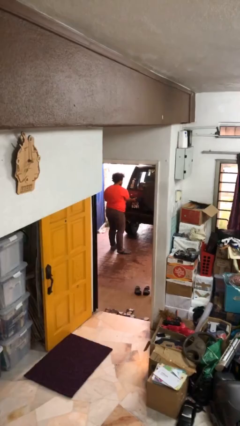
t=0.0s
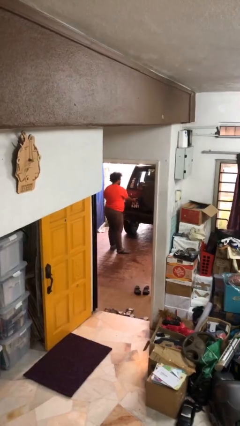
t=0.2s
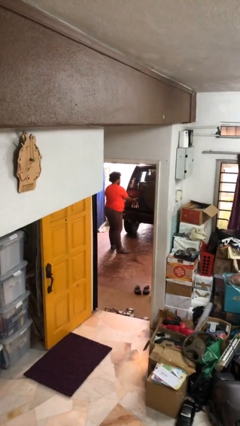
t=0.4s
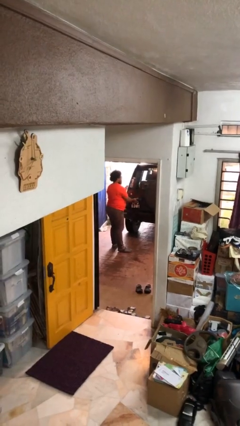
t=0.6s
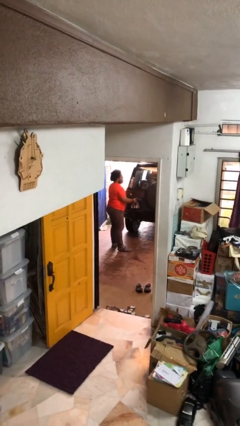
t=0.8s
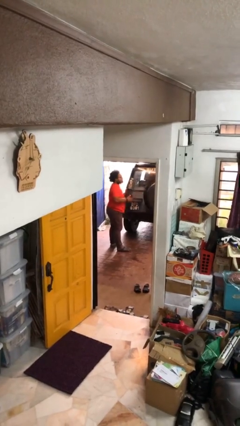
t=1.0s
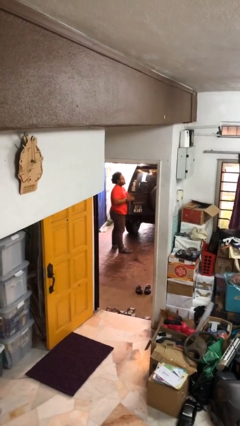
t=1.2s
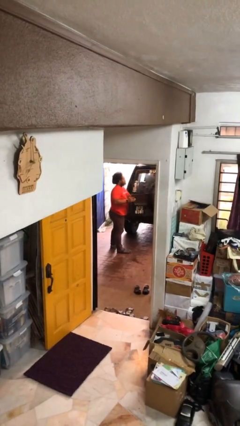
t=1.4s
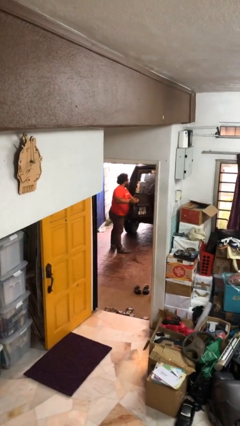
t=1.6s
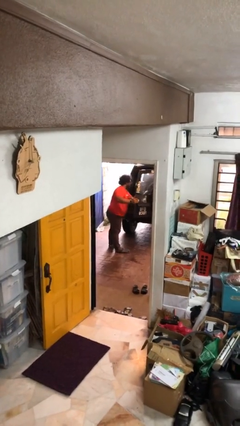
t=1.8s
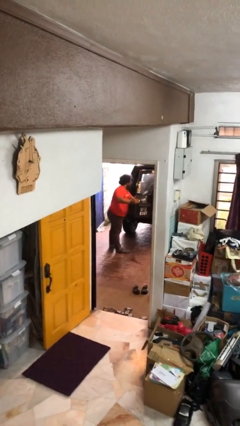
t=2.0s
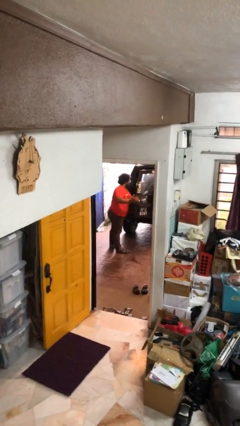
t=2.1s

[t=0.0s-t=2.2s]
person opens car trunk

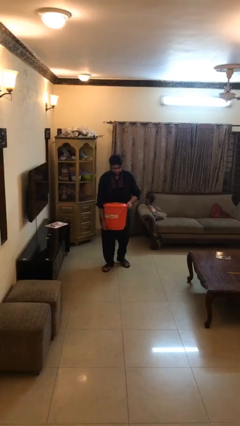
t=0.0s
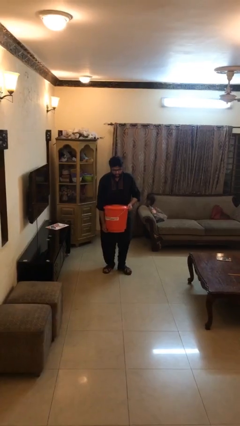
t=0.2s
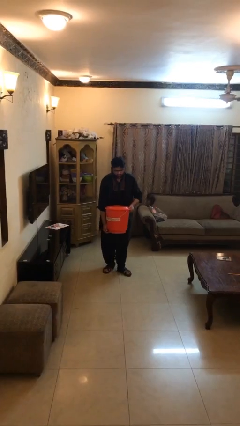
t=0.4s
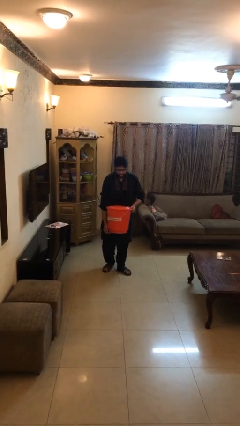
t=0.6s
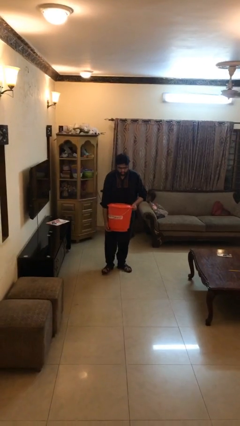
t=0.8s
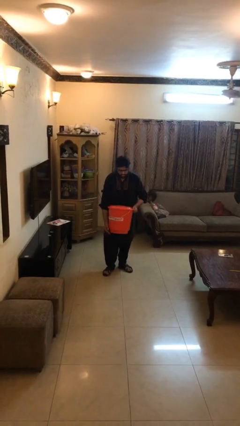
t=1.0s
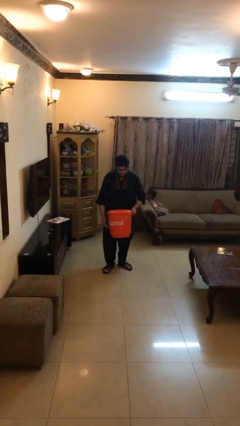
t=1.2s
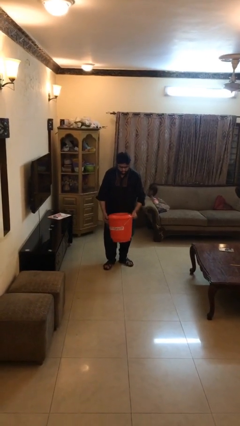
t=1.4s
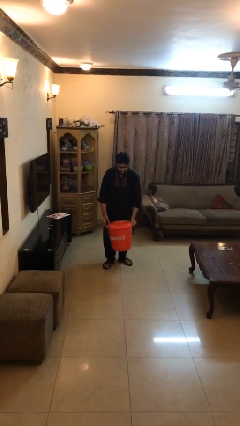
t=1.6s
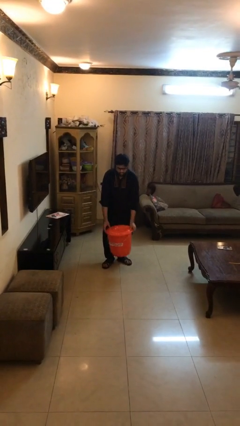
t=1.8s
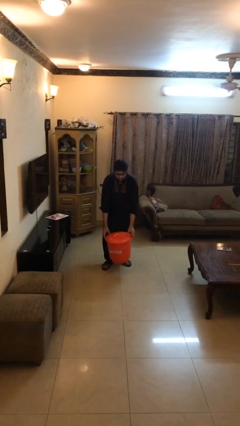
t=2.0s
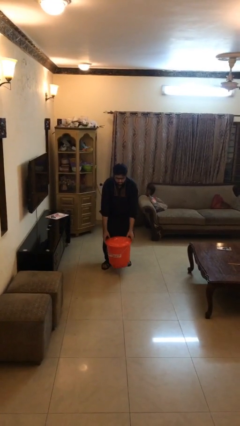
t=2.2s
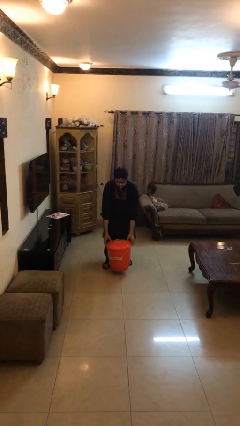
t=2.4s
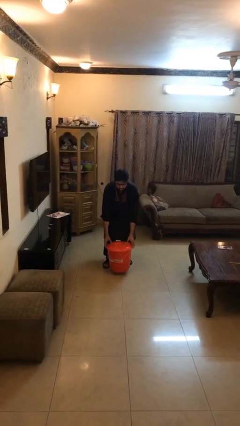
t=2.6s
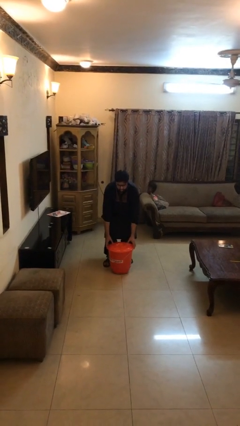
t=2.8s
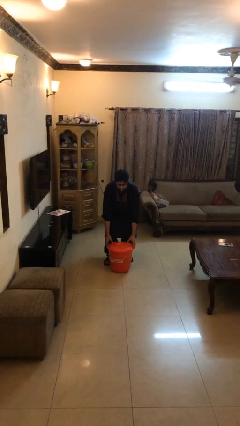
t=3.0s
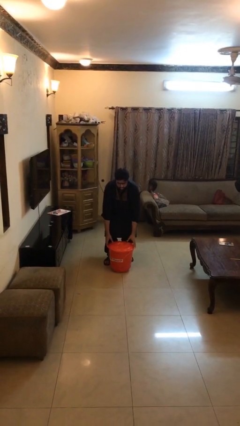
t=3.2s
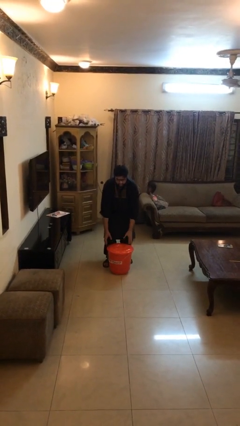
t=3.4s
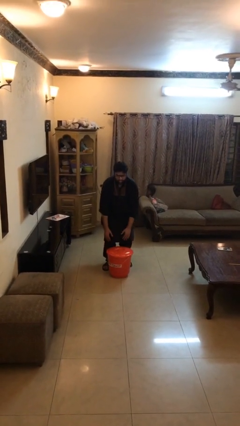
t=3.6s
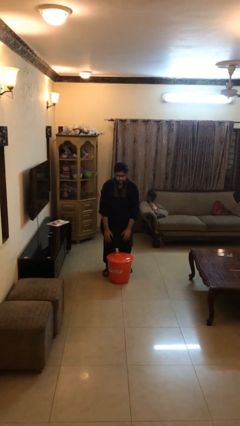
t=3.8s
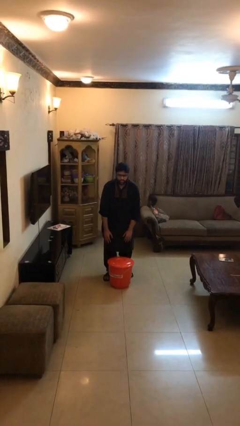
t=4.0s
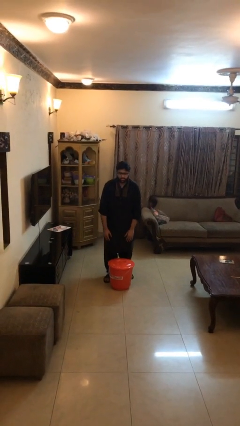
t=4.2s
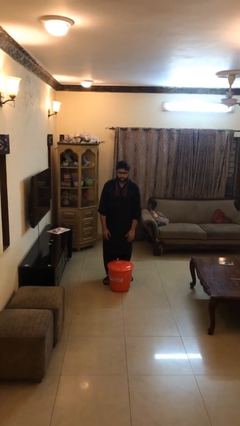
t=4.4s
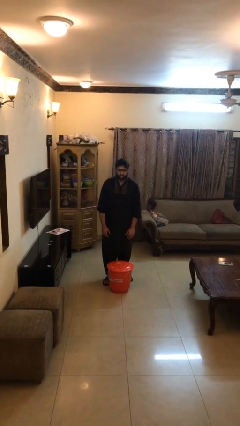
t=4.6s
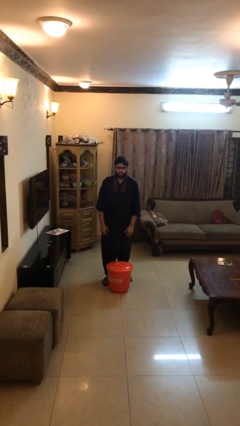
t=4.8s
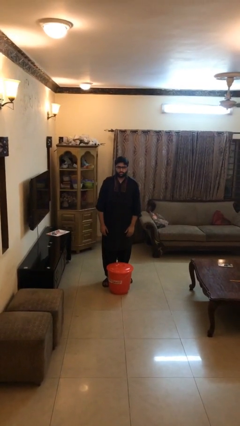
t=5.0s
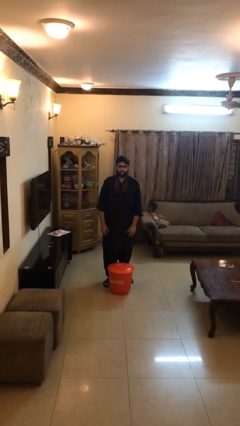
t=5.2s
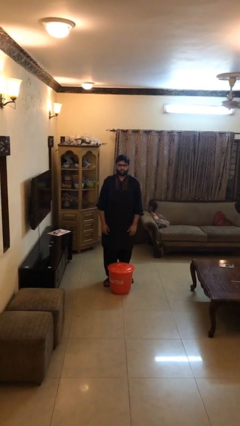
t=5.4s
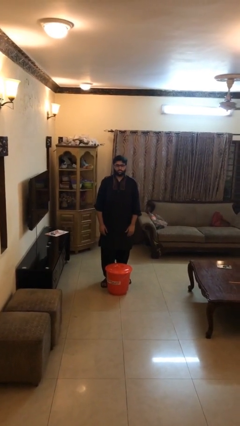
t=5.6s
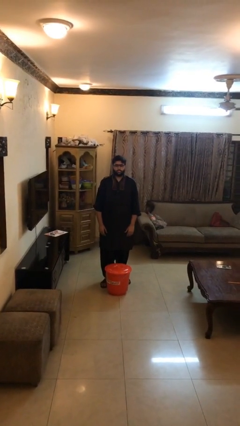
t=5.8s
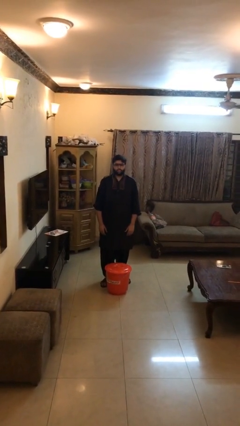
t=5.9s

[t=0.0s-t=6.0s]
person puts down object on floor

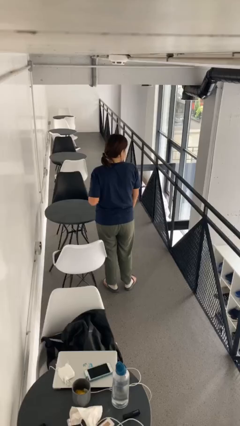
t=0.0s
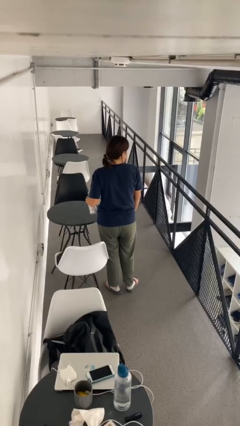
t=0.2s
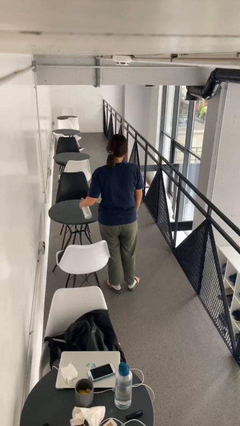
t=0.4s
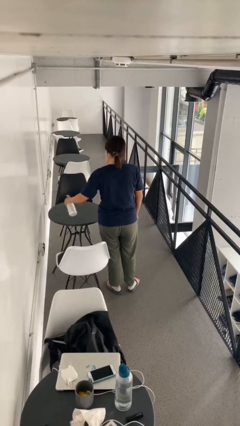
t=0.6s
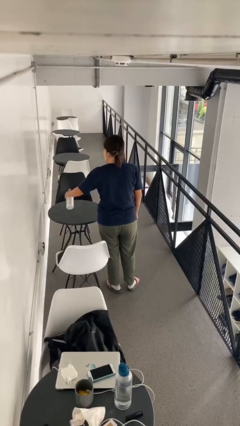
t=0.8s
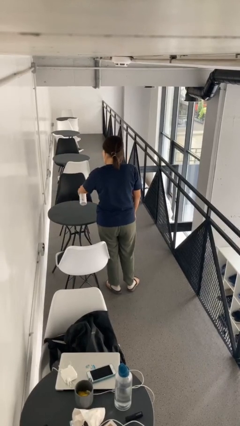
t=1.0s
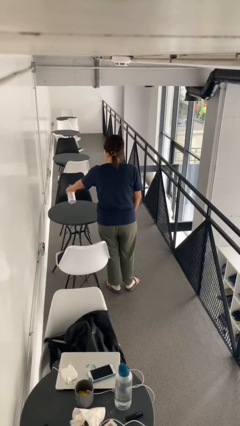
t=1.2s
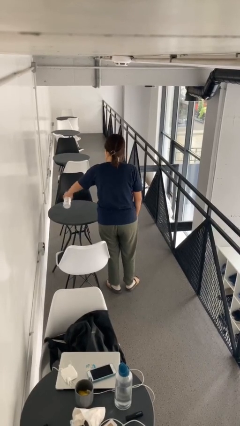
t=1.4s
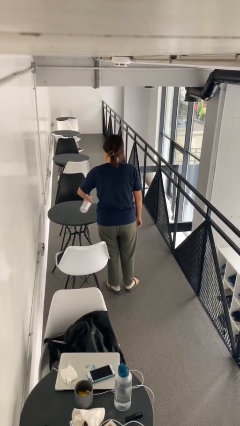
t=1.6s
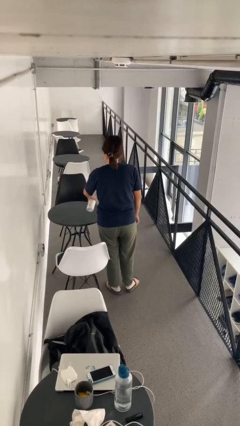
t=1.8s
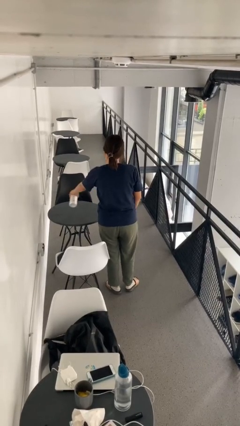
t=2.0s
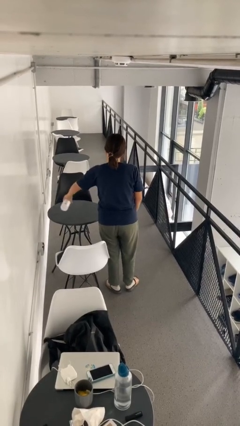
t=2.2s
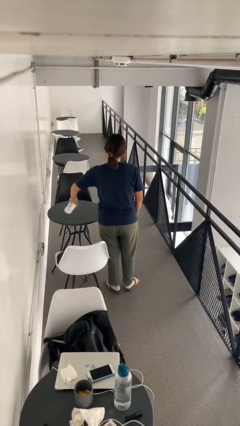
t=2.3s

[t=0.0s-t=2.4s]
person sprays from bottle

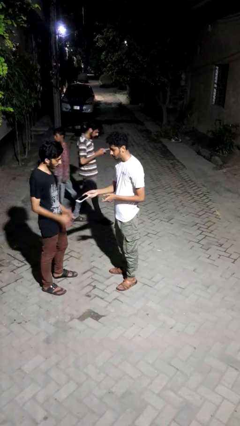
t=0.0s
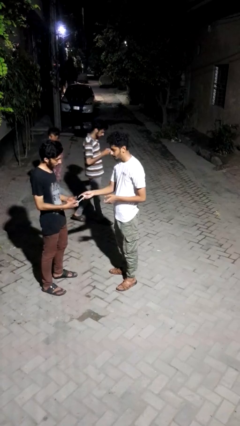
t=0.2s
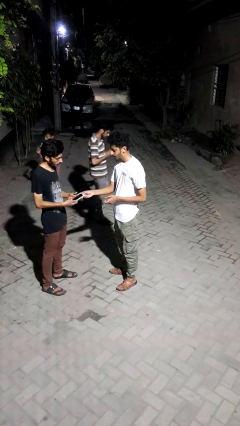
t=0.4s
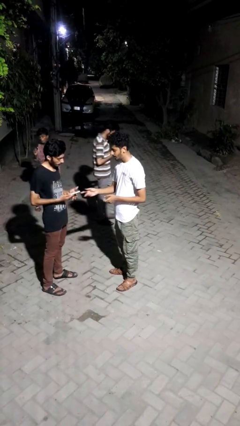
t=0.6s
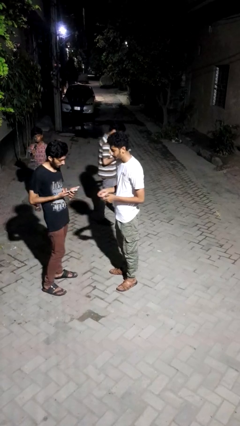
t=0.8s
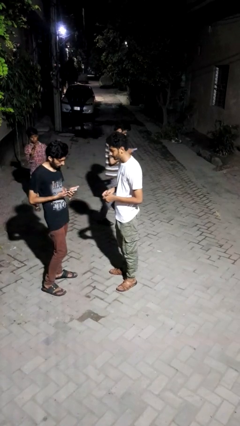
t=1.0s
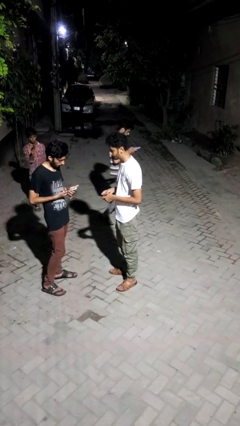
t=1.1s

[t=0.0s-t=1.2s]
person transfers object to person

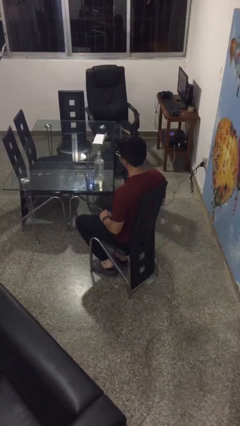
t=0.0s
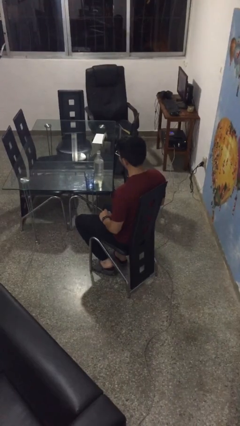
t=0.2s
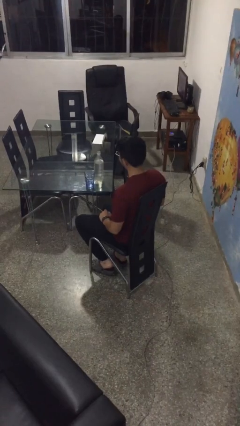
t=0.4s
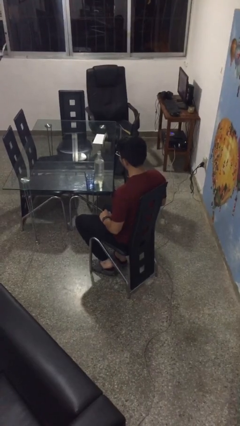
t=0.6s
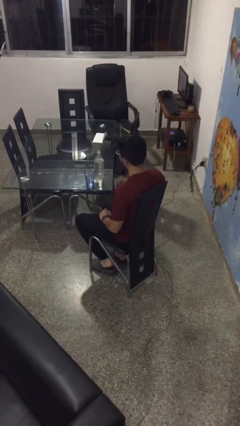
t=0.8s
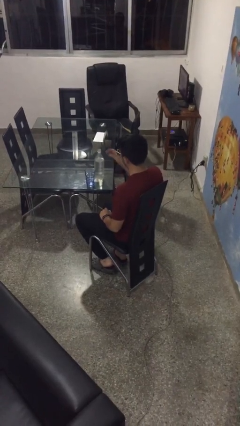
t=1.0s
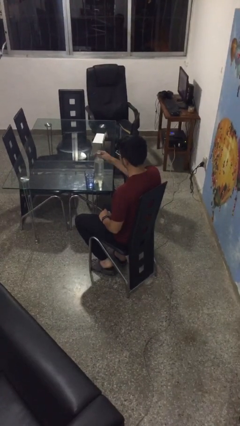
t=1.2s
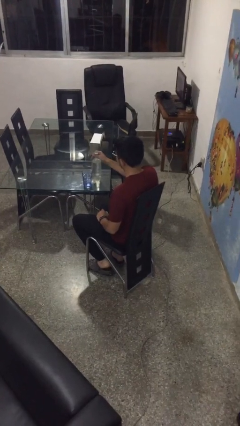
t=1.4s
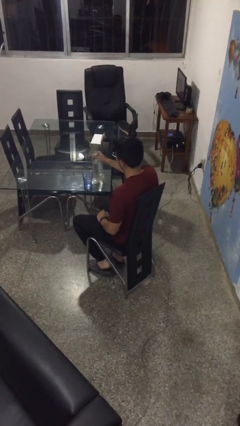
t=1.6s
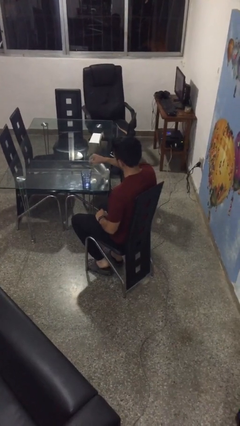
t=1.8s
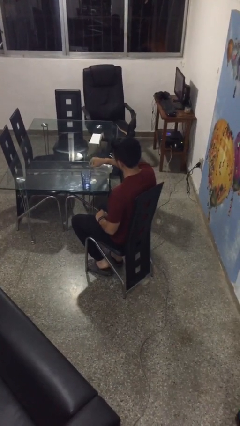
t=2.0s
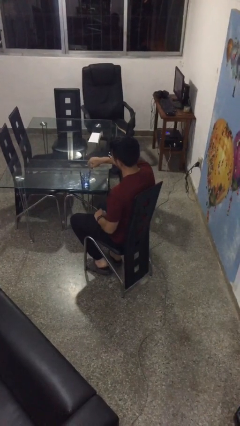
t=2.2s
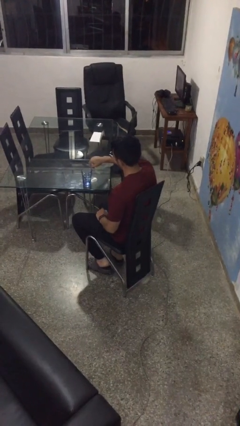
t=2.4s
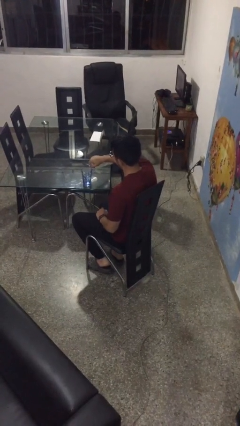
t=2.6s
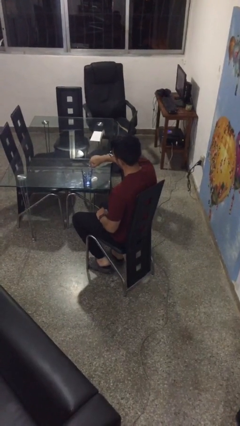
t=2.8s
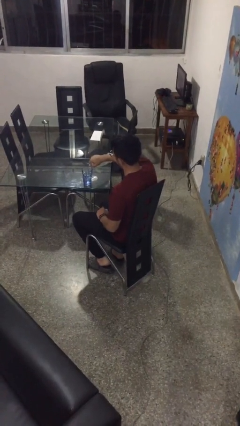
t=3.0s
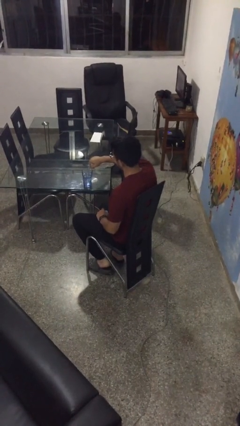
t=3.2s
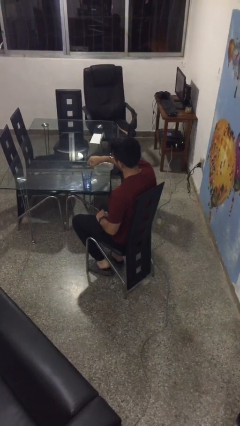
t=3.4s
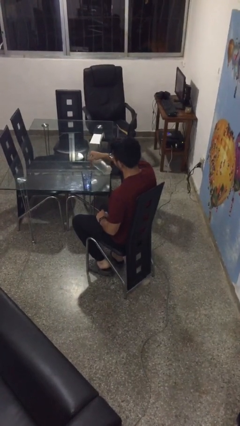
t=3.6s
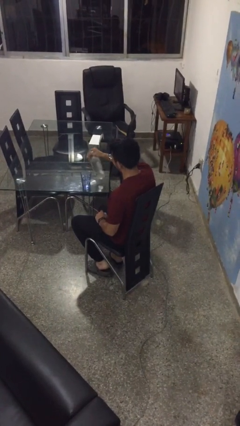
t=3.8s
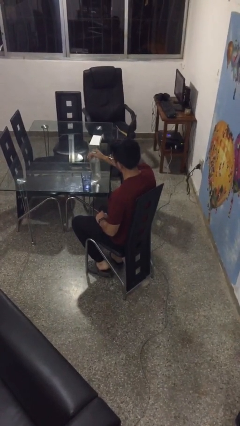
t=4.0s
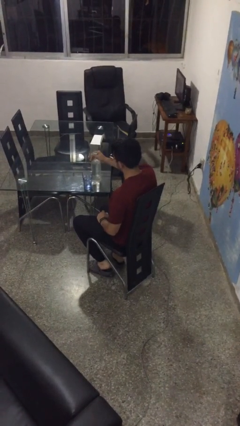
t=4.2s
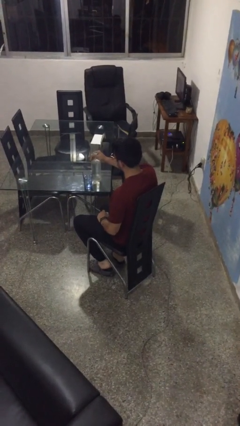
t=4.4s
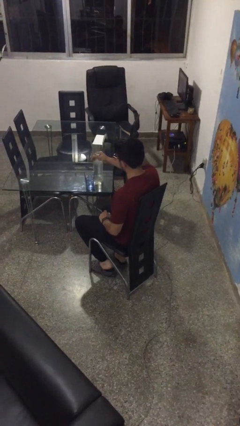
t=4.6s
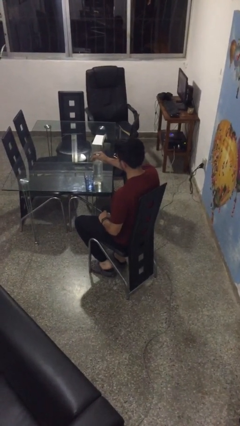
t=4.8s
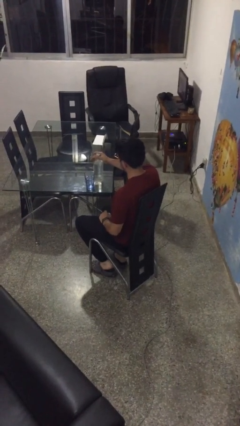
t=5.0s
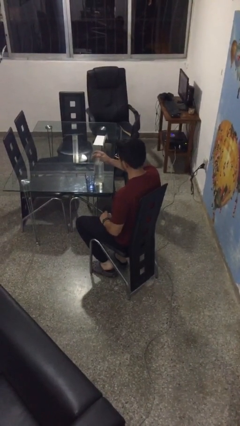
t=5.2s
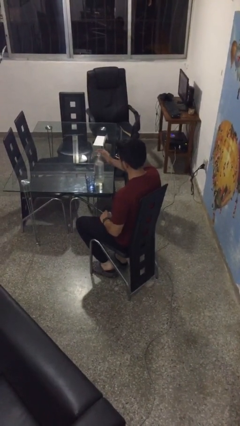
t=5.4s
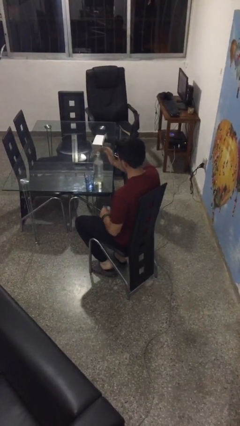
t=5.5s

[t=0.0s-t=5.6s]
person pours liquid into cup
